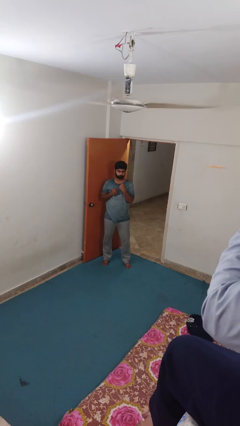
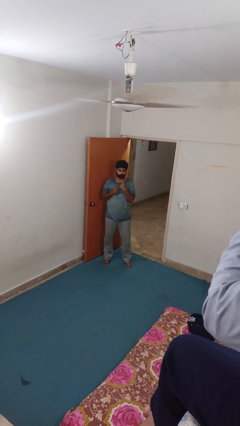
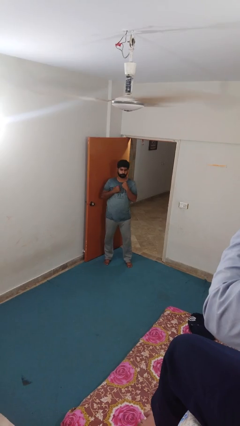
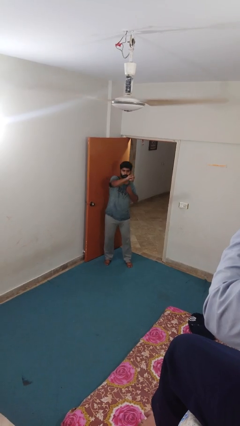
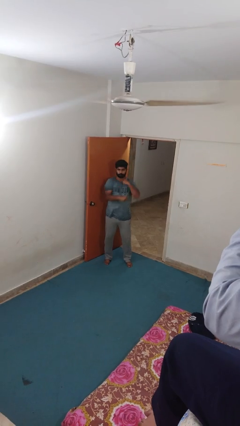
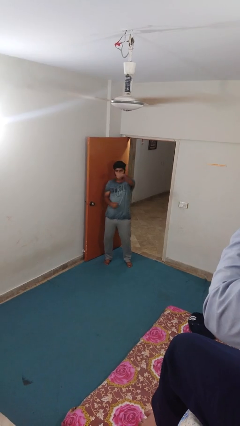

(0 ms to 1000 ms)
person punches

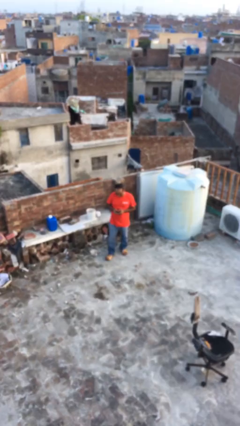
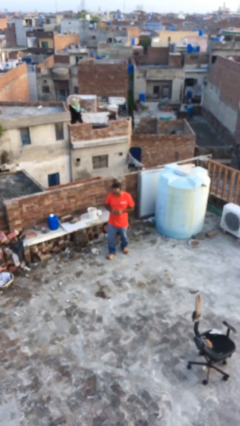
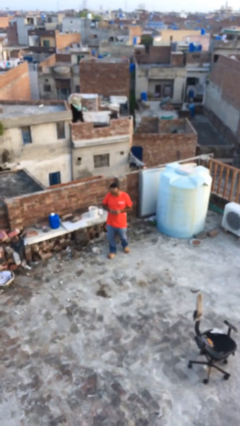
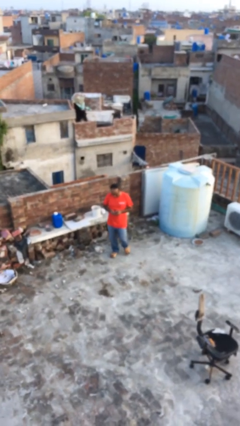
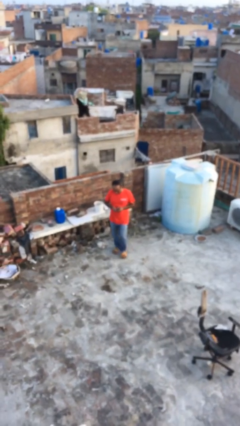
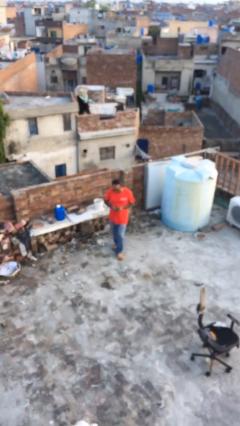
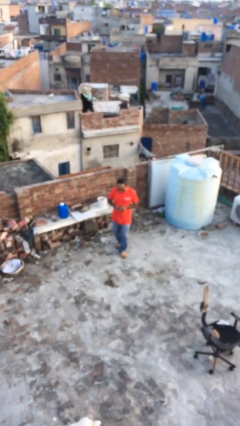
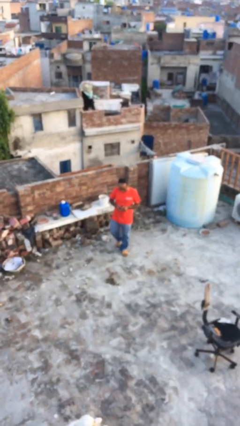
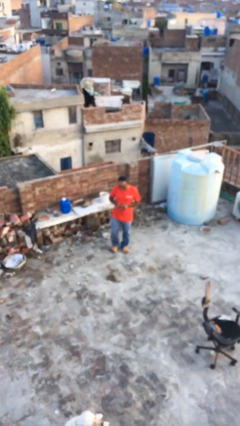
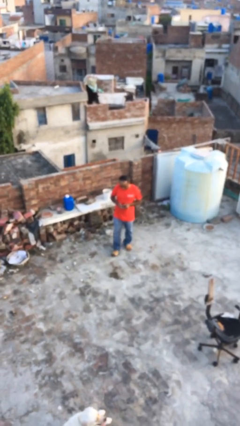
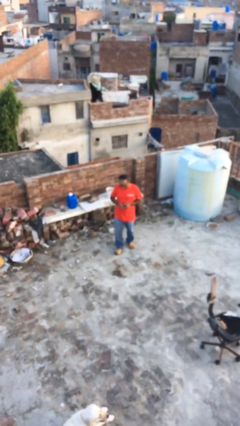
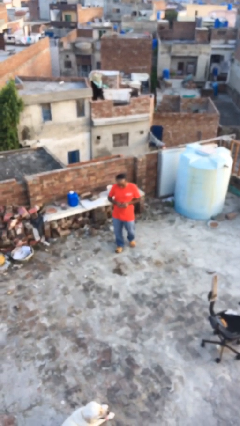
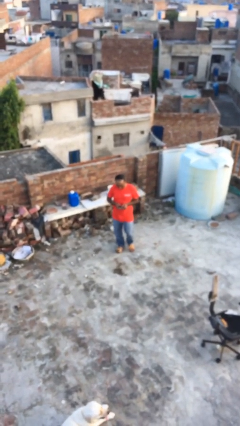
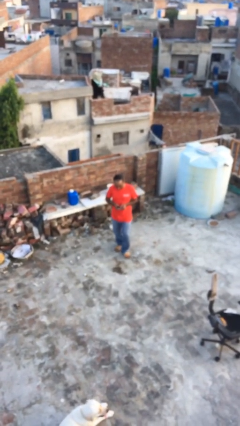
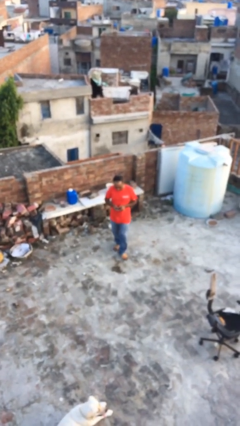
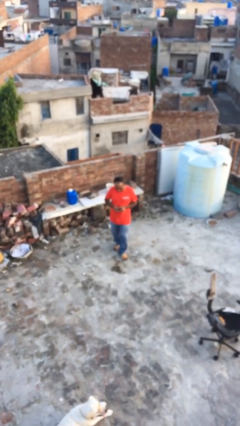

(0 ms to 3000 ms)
person texts on phone

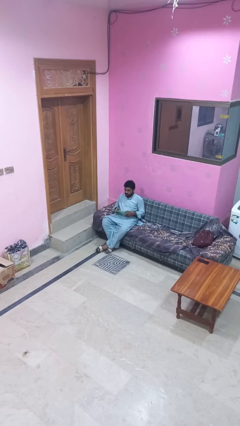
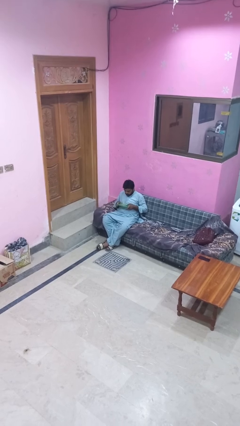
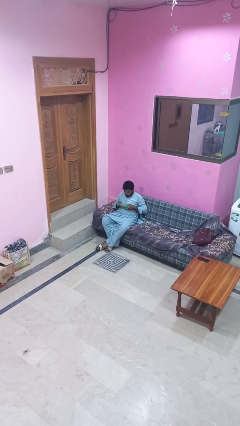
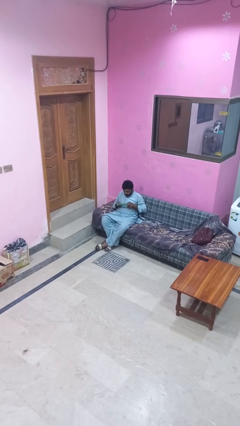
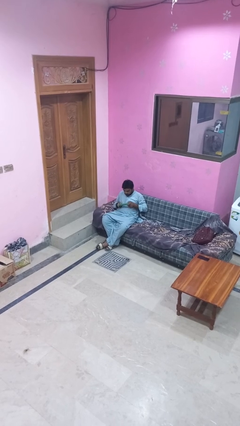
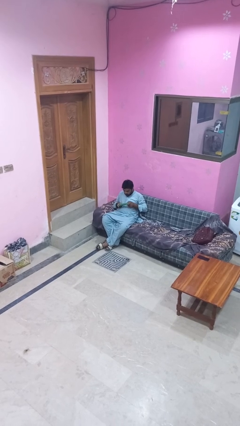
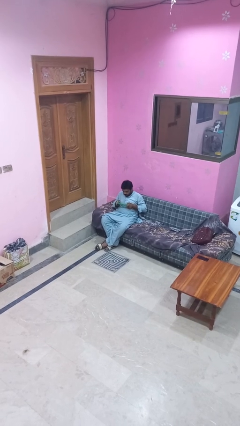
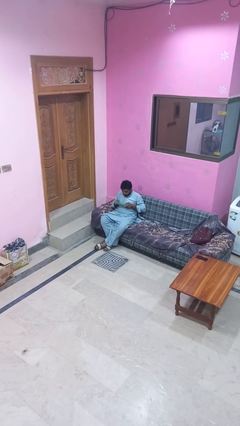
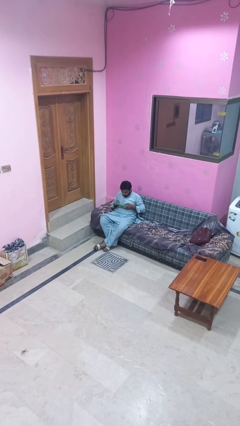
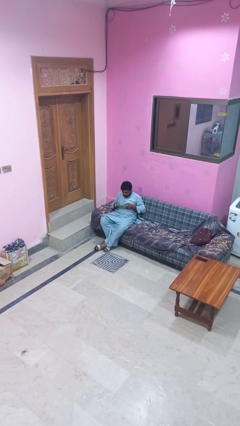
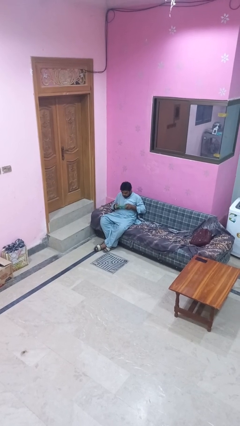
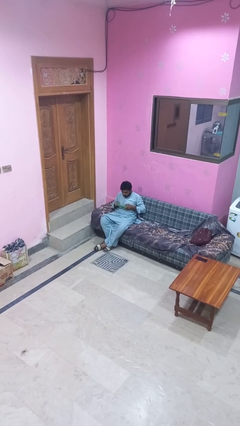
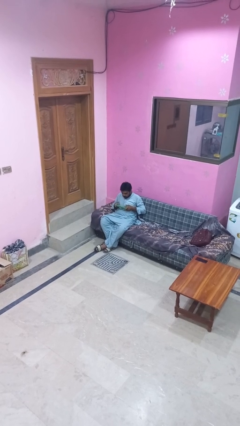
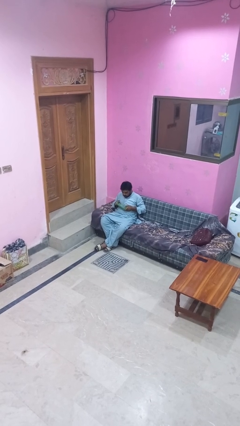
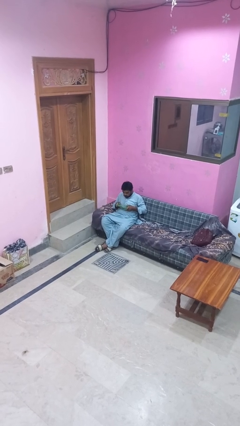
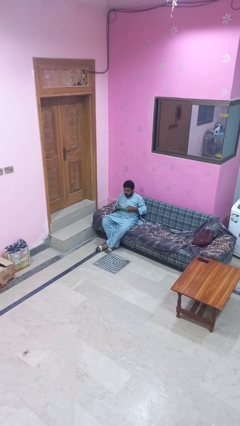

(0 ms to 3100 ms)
person interacts with handheld game

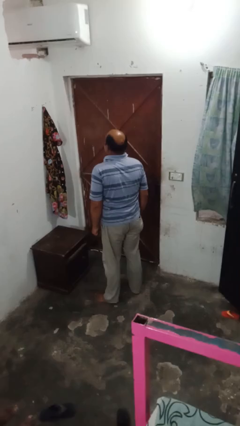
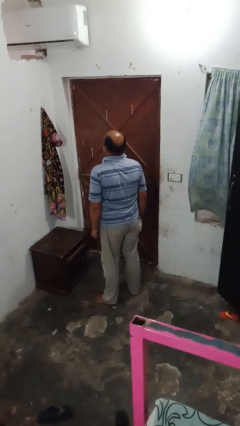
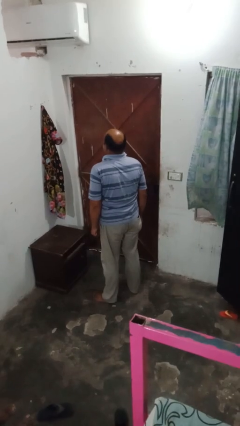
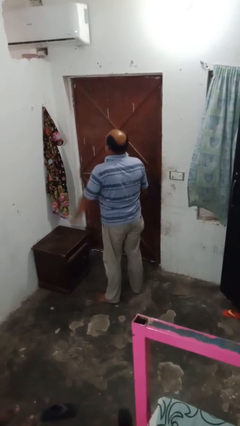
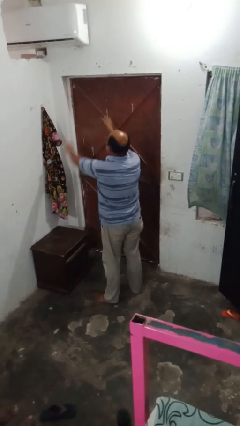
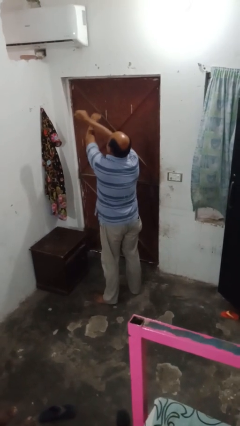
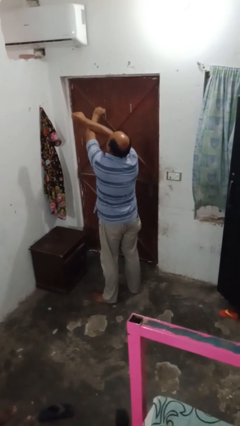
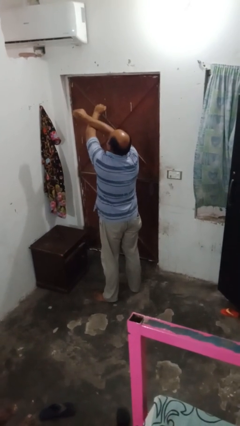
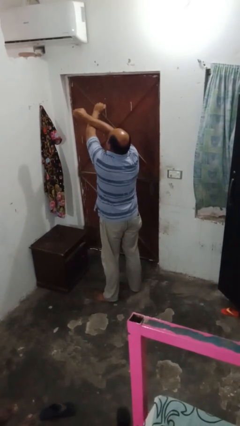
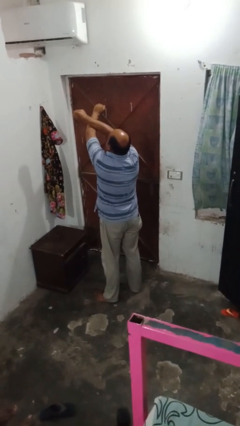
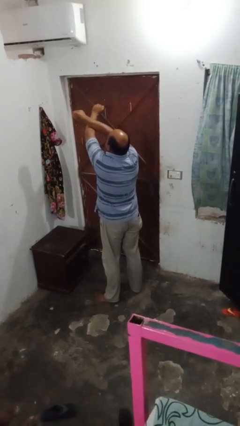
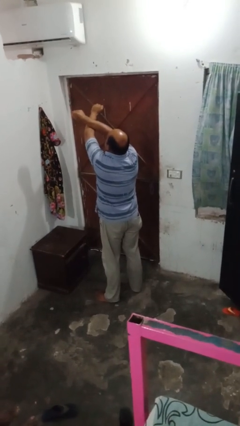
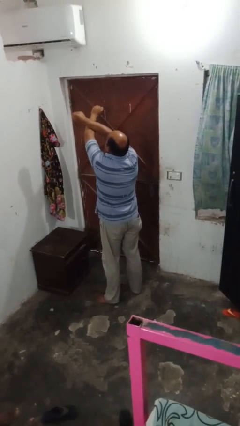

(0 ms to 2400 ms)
person gestures arms x

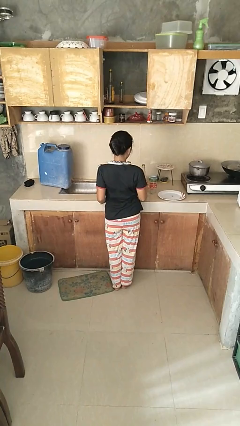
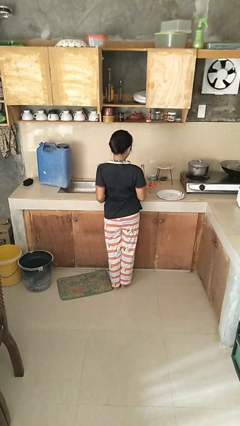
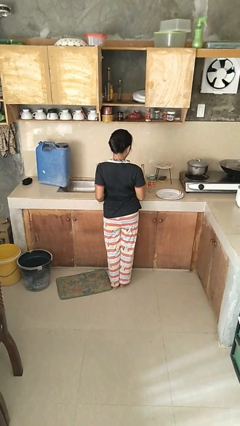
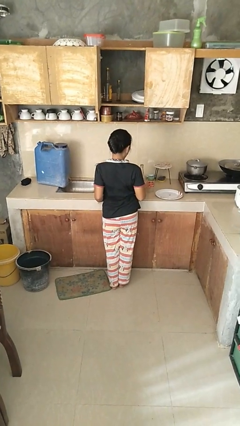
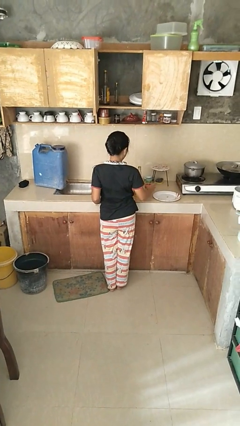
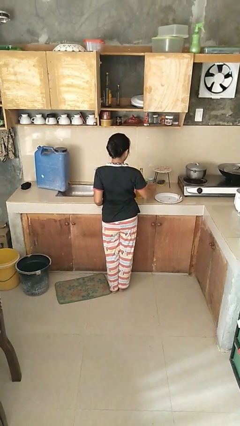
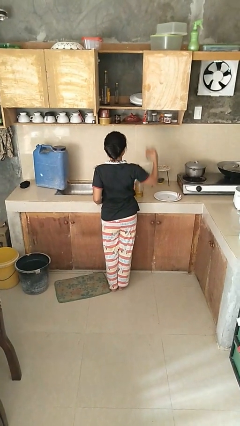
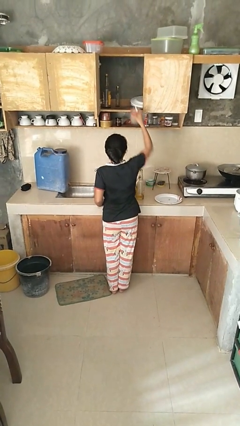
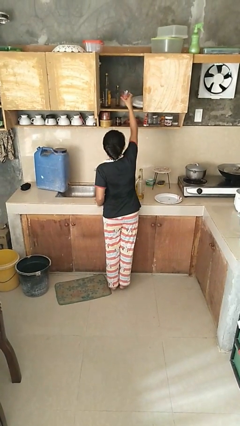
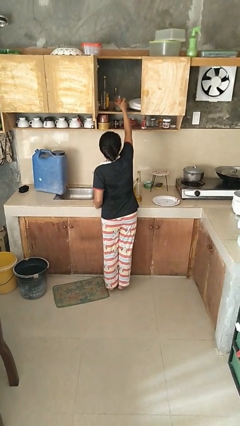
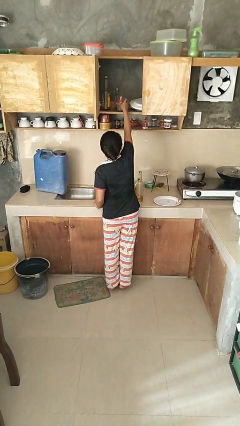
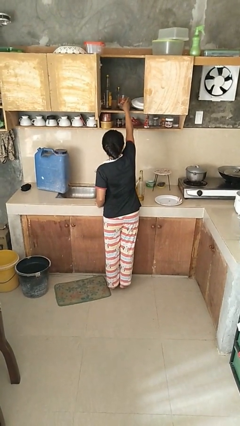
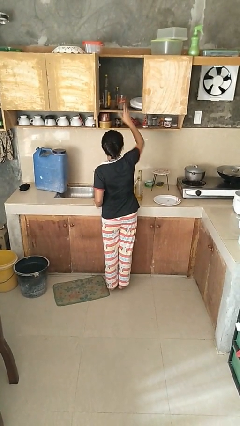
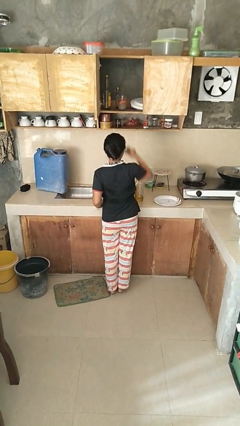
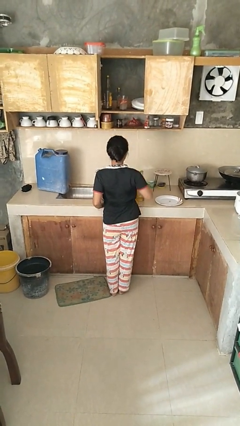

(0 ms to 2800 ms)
person puts object in cabinet

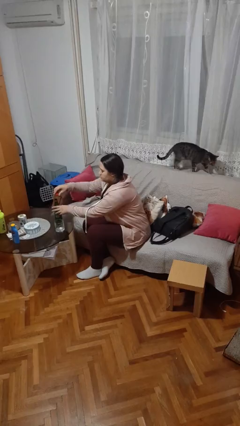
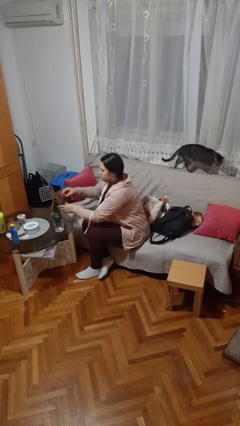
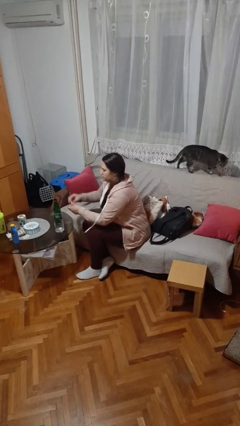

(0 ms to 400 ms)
person unscrews lid from bottle

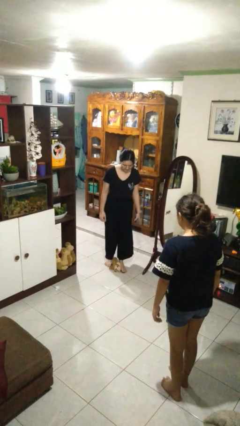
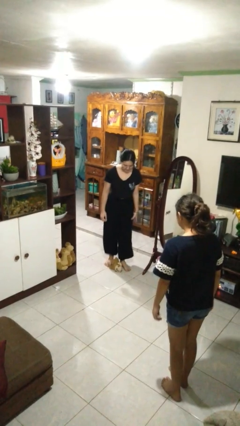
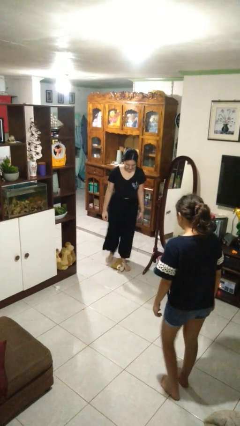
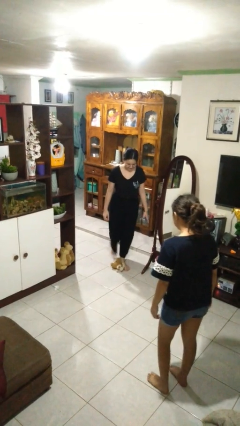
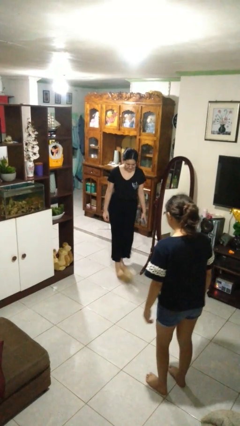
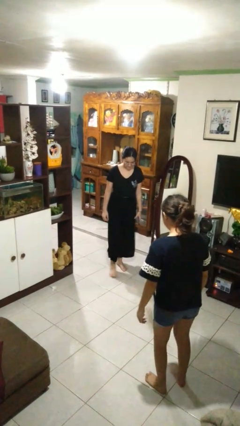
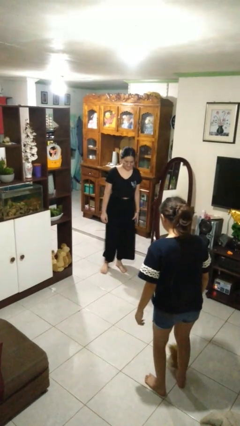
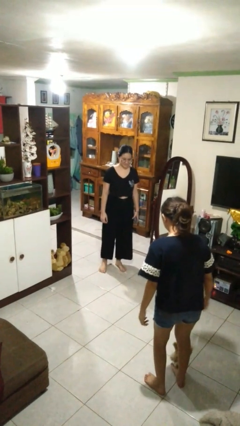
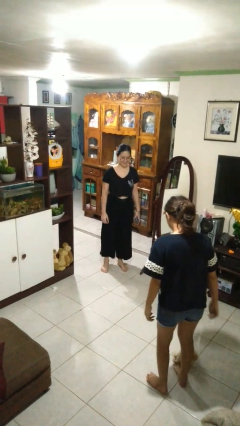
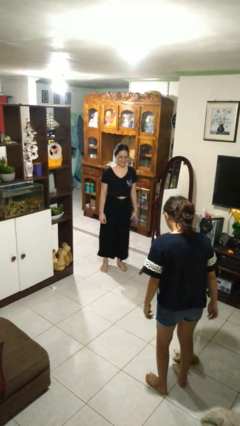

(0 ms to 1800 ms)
person kicks object to person

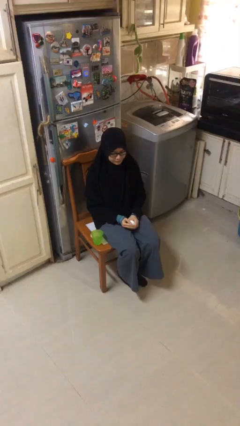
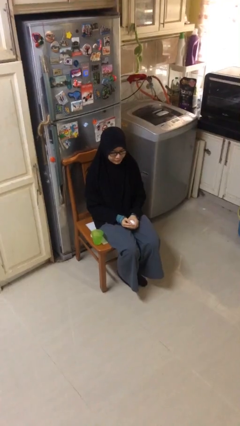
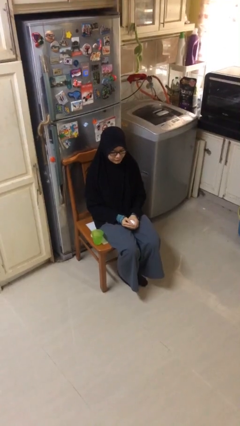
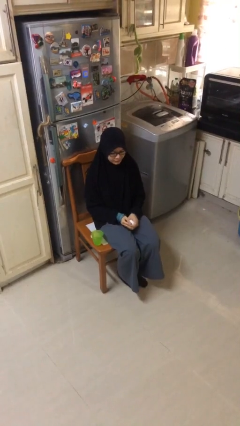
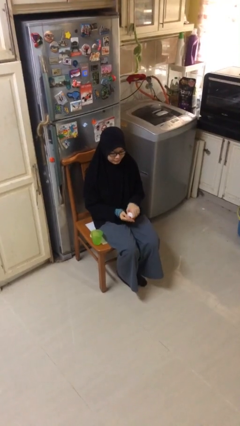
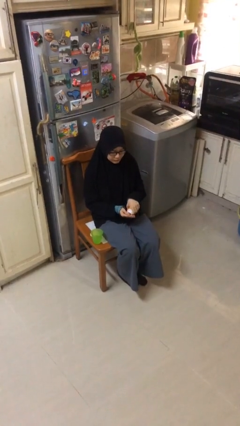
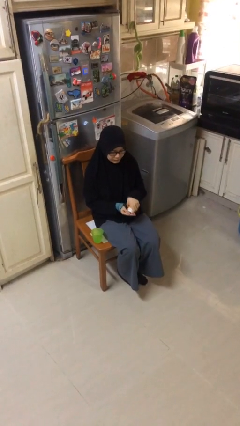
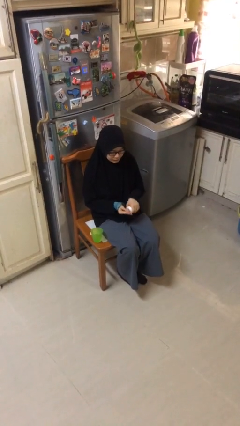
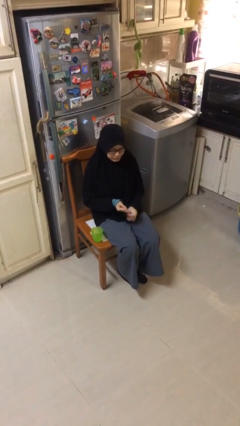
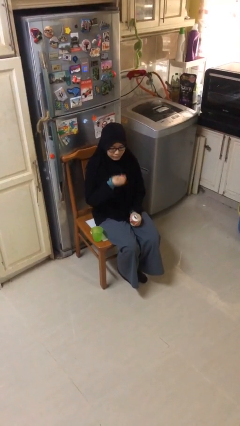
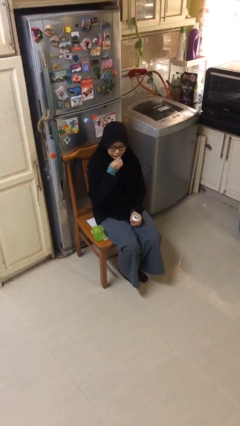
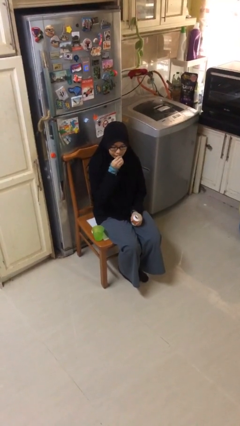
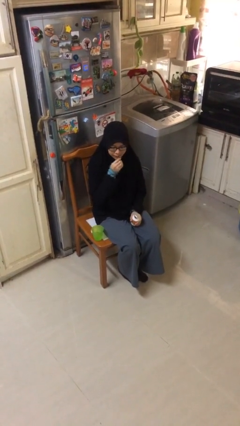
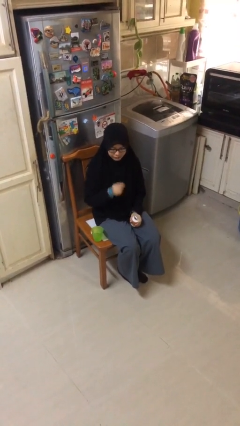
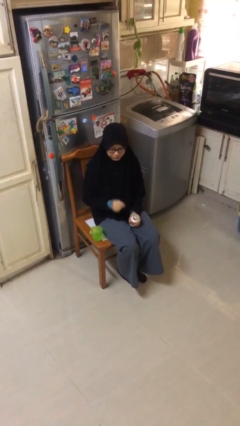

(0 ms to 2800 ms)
person takes medicine pills
